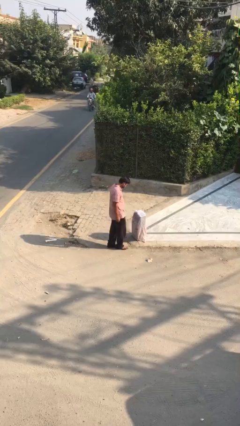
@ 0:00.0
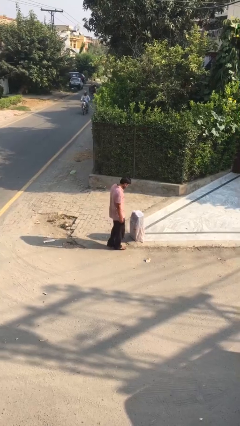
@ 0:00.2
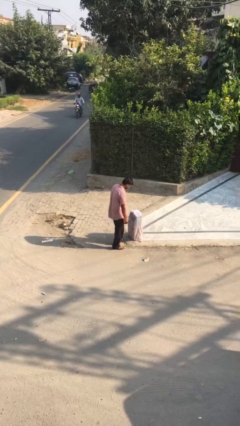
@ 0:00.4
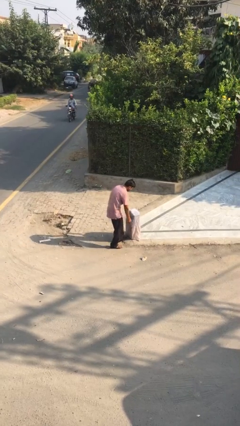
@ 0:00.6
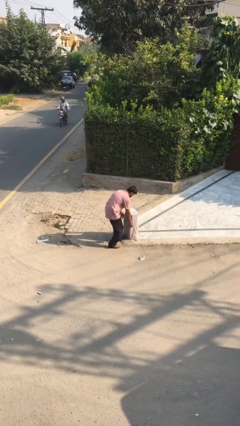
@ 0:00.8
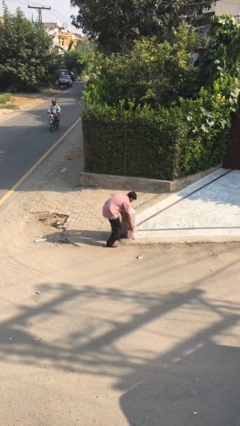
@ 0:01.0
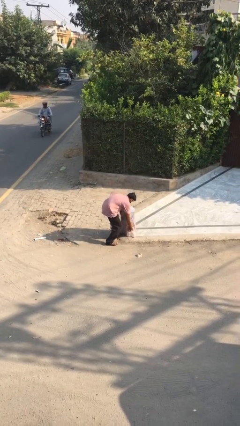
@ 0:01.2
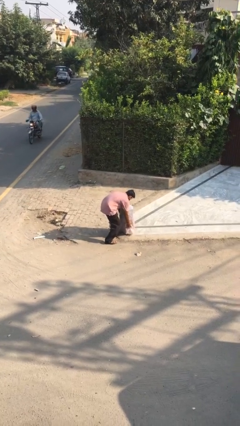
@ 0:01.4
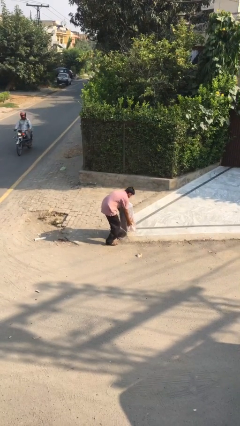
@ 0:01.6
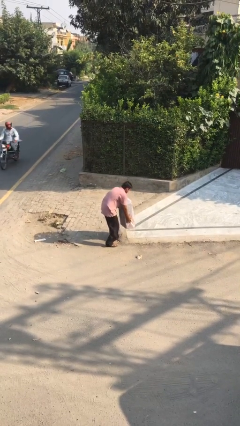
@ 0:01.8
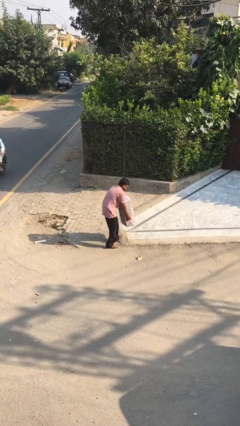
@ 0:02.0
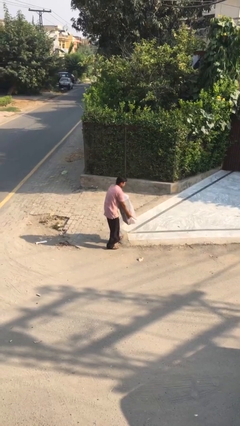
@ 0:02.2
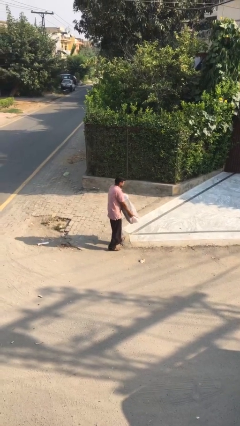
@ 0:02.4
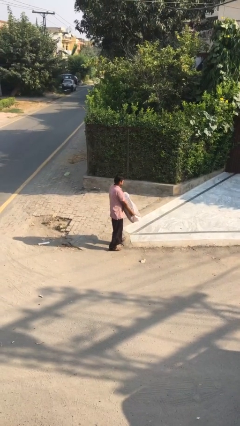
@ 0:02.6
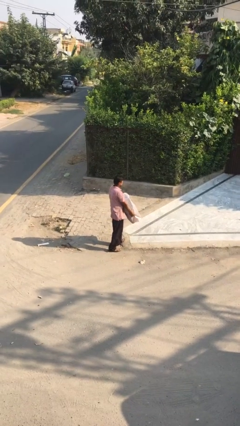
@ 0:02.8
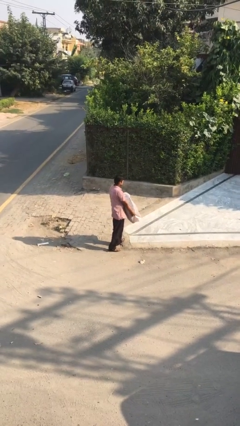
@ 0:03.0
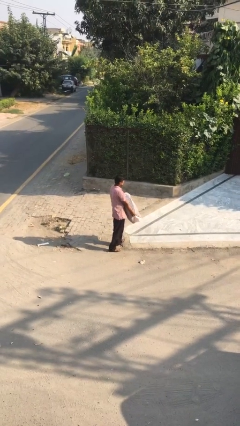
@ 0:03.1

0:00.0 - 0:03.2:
person picks up object from floor

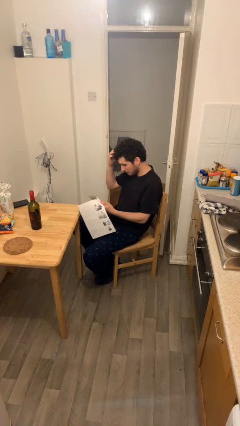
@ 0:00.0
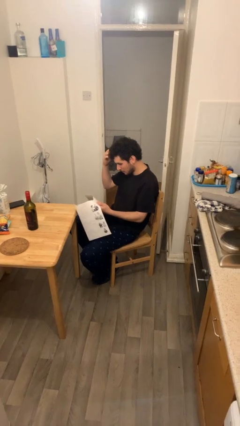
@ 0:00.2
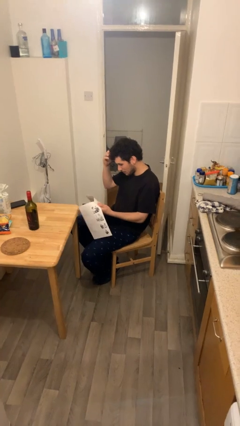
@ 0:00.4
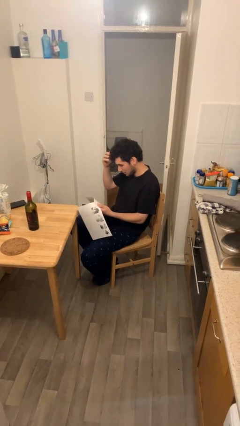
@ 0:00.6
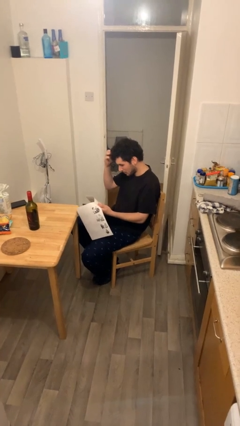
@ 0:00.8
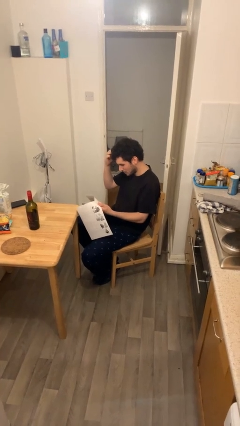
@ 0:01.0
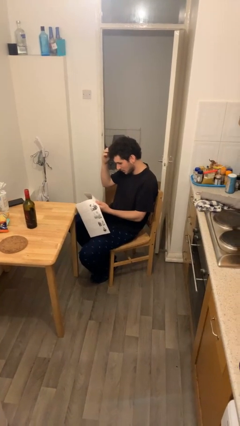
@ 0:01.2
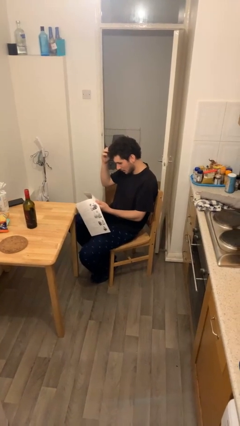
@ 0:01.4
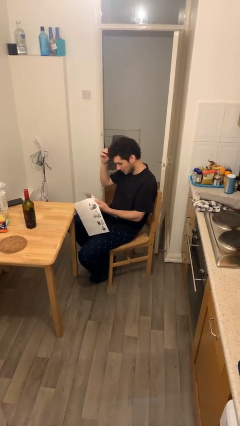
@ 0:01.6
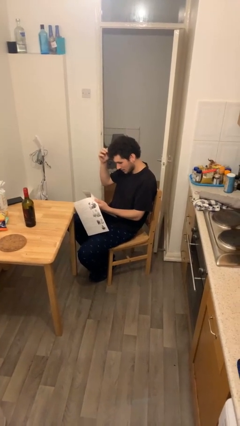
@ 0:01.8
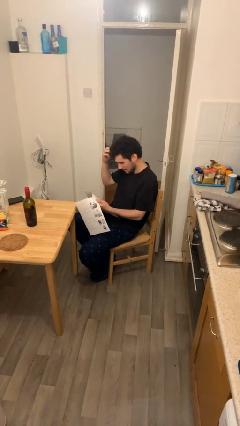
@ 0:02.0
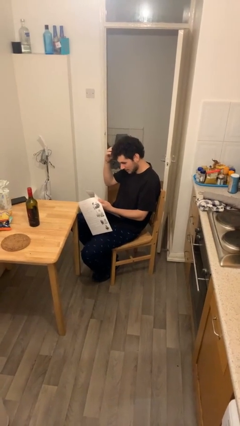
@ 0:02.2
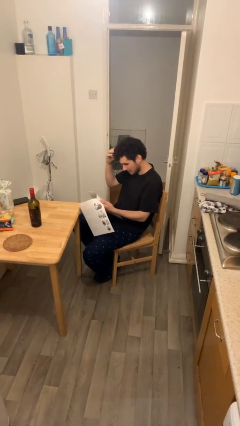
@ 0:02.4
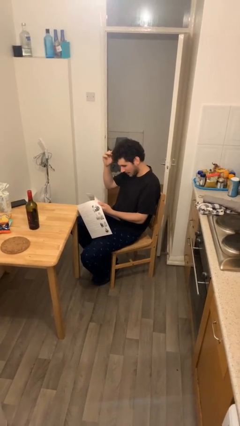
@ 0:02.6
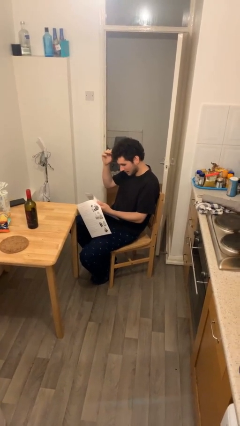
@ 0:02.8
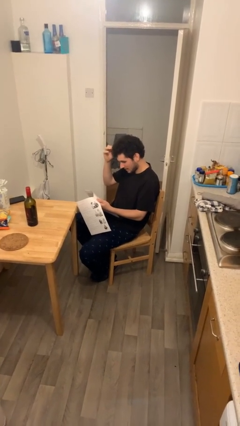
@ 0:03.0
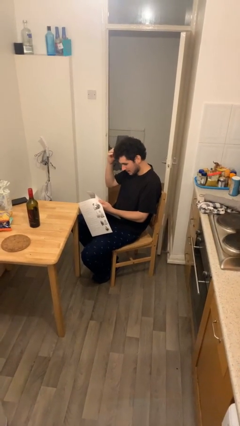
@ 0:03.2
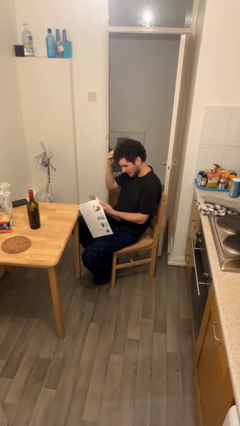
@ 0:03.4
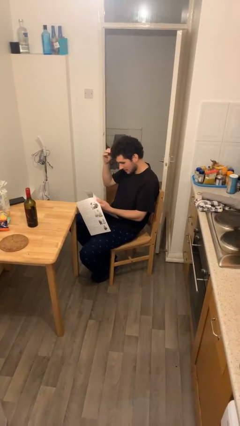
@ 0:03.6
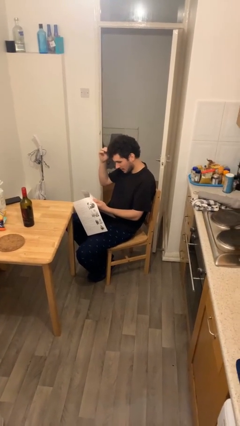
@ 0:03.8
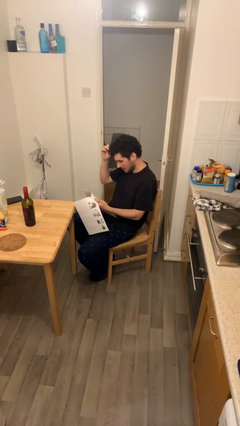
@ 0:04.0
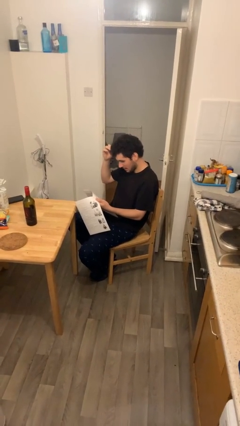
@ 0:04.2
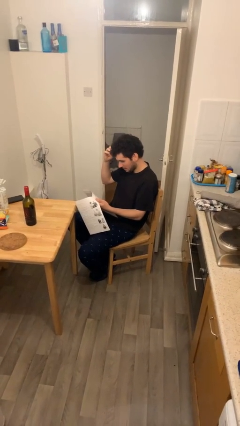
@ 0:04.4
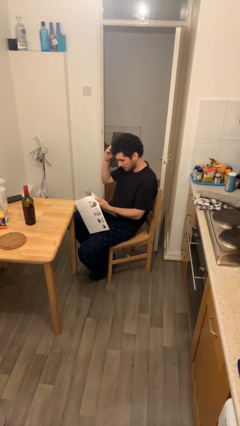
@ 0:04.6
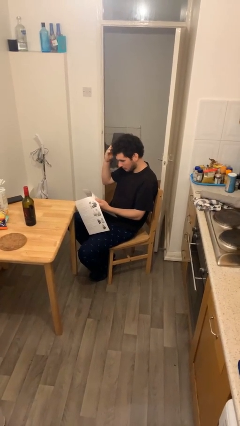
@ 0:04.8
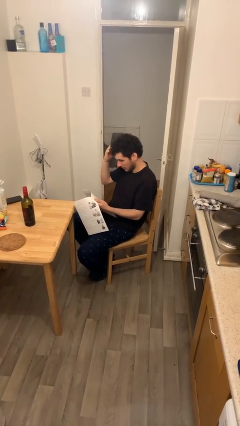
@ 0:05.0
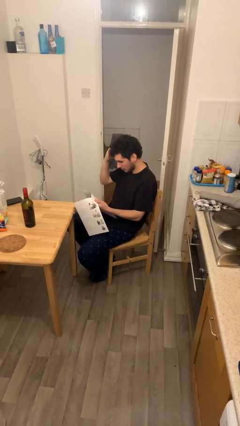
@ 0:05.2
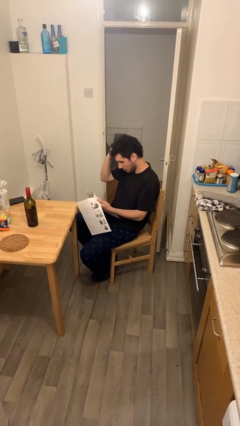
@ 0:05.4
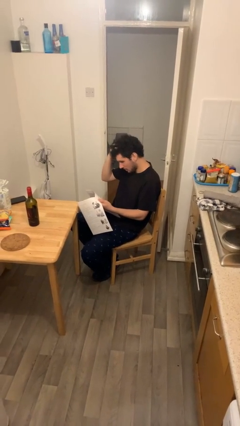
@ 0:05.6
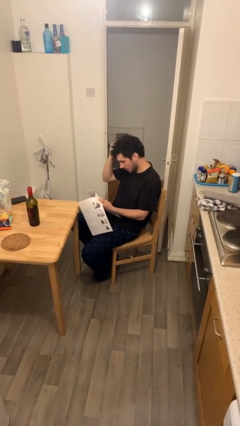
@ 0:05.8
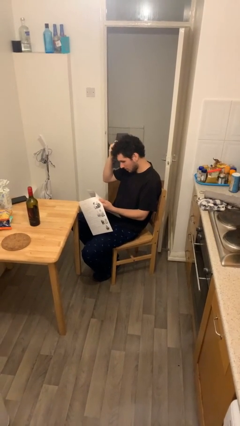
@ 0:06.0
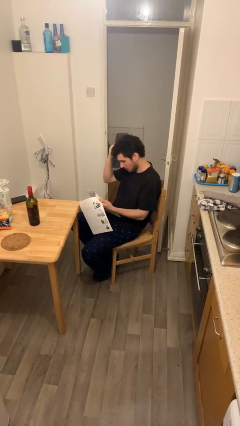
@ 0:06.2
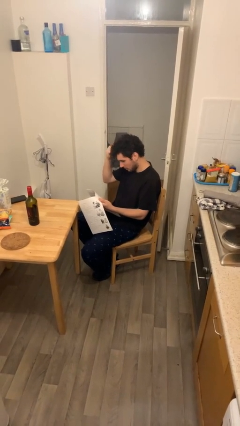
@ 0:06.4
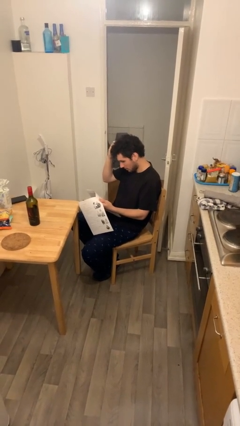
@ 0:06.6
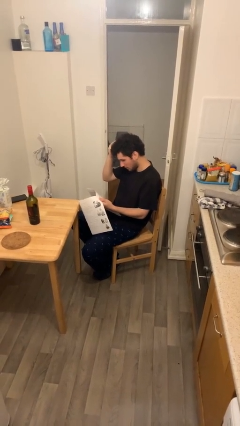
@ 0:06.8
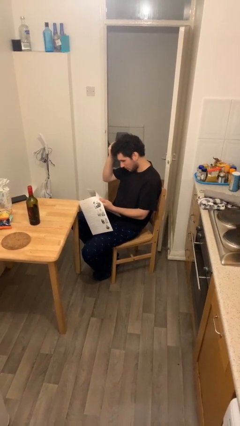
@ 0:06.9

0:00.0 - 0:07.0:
person reads document

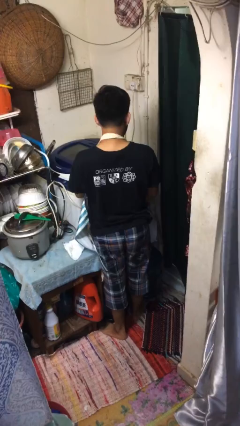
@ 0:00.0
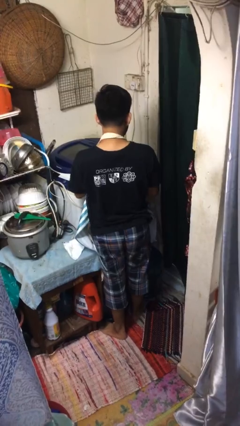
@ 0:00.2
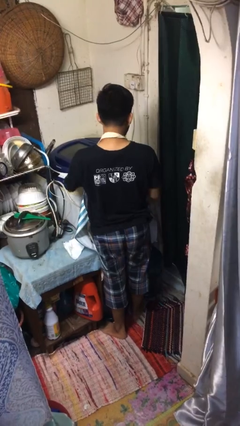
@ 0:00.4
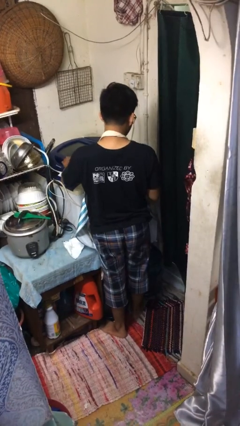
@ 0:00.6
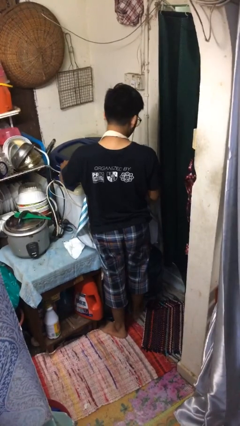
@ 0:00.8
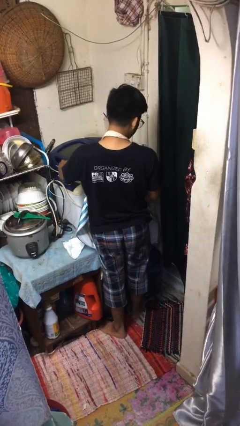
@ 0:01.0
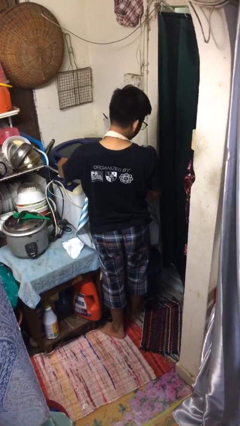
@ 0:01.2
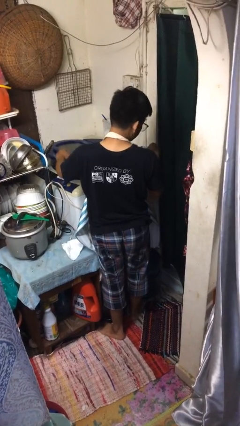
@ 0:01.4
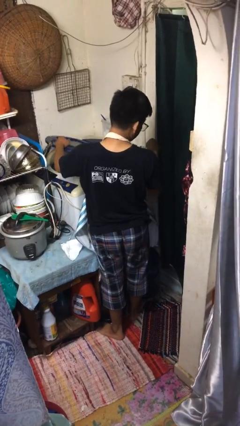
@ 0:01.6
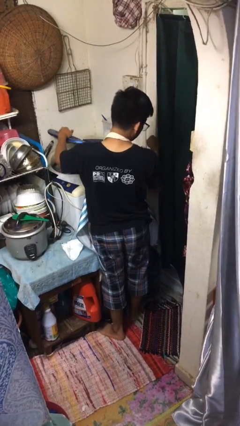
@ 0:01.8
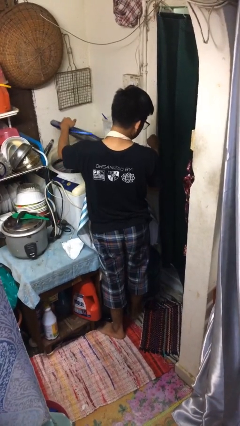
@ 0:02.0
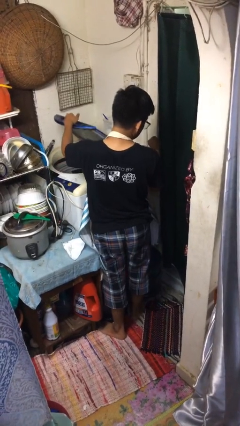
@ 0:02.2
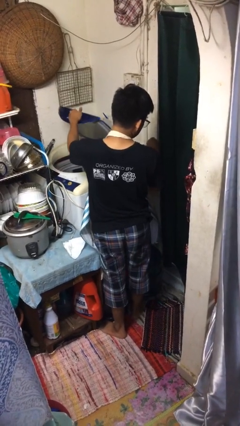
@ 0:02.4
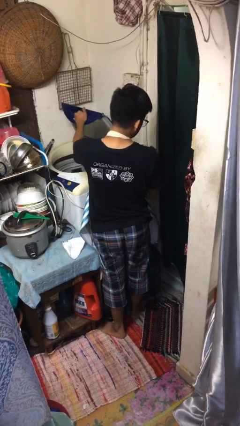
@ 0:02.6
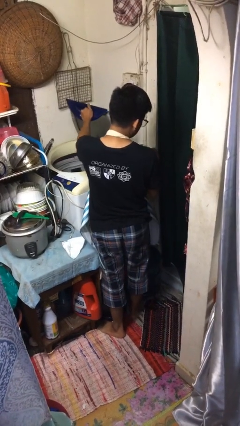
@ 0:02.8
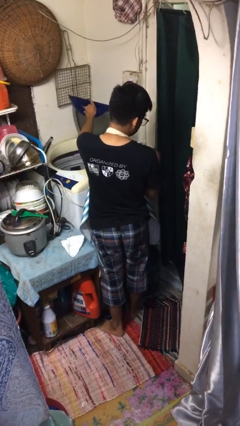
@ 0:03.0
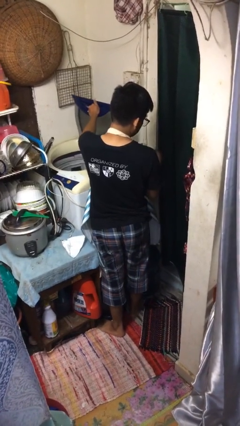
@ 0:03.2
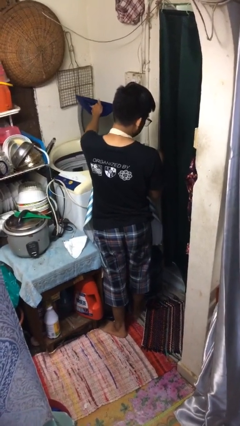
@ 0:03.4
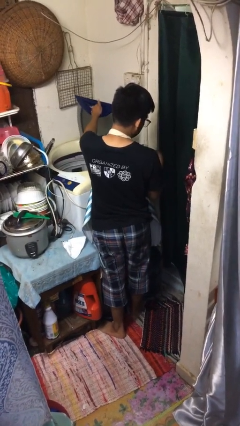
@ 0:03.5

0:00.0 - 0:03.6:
person opens clothes washer

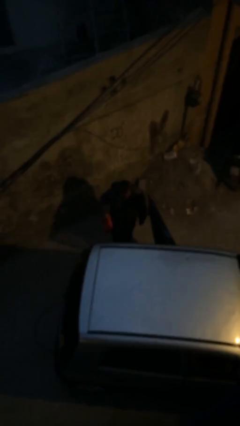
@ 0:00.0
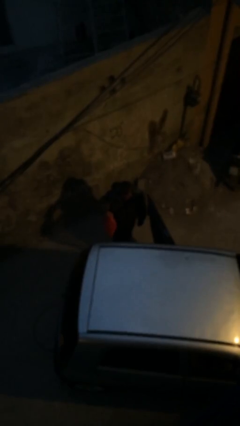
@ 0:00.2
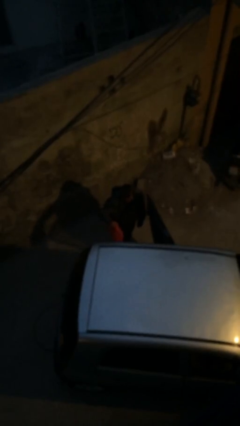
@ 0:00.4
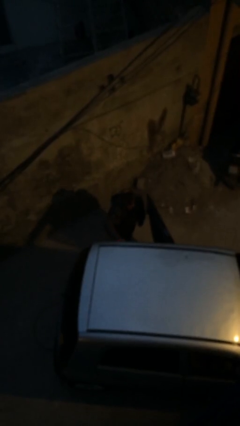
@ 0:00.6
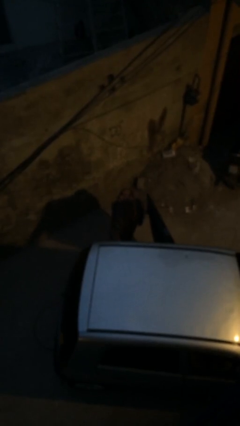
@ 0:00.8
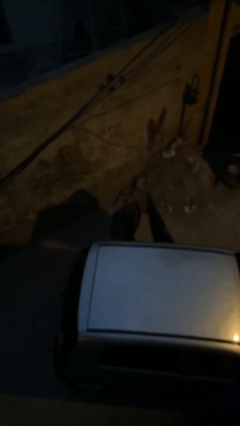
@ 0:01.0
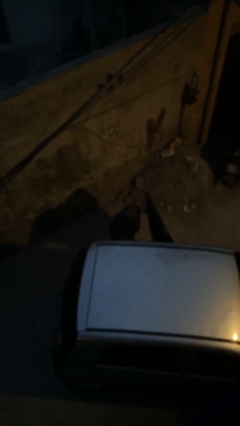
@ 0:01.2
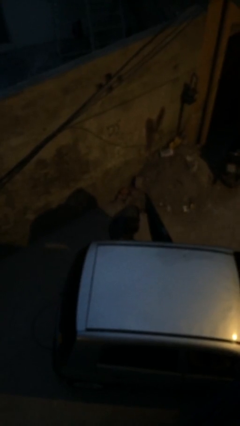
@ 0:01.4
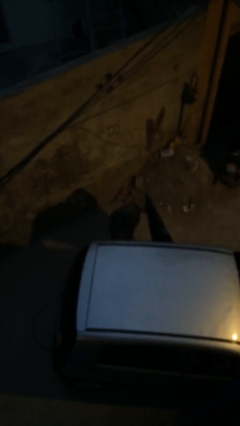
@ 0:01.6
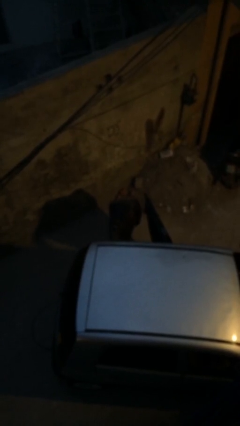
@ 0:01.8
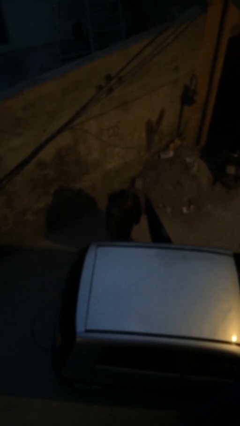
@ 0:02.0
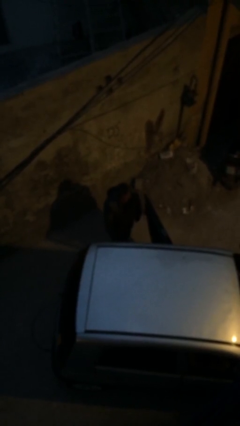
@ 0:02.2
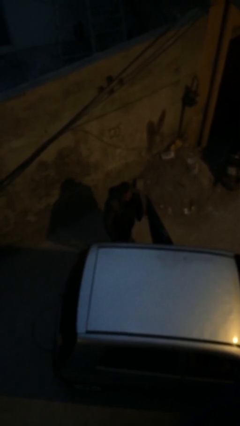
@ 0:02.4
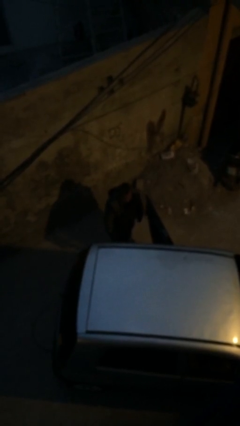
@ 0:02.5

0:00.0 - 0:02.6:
person loads car

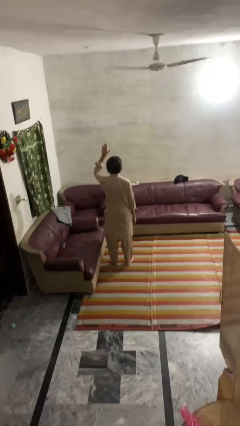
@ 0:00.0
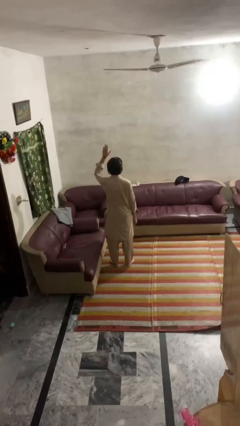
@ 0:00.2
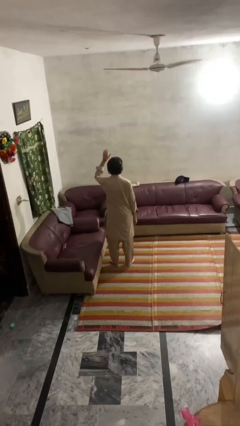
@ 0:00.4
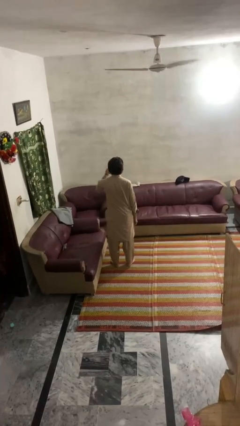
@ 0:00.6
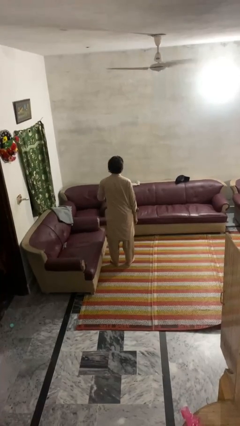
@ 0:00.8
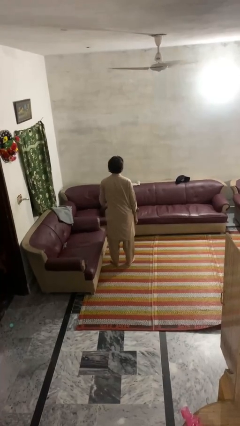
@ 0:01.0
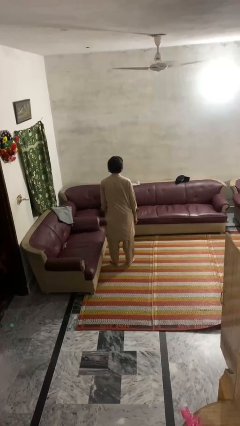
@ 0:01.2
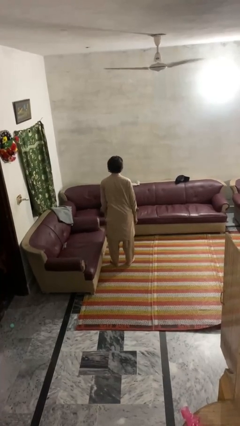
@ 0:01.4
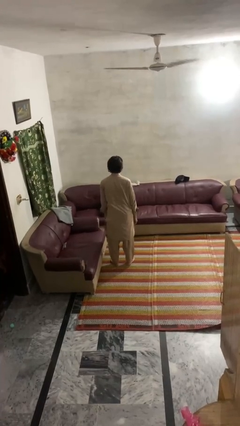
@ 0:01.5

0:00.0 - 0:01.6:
person gestures lower hand
